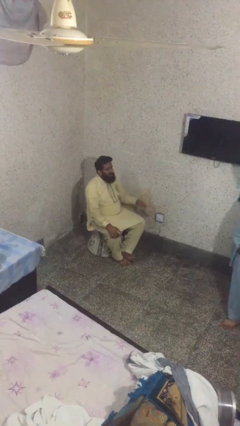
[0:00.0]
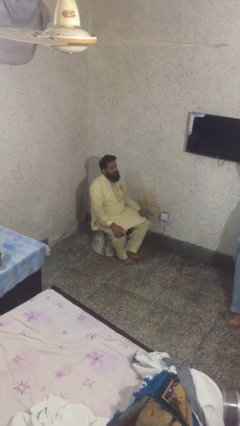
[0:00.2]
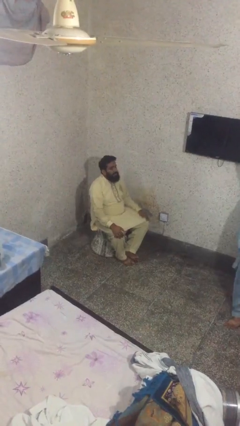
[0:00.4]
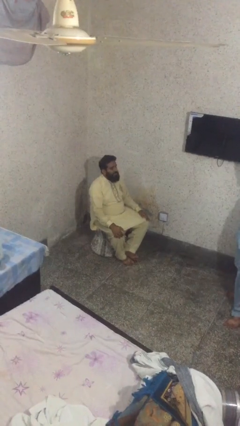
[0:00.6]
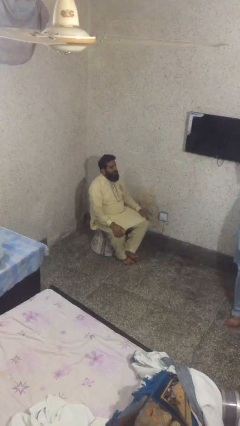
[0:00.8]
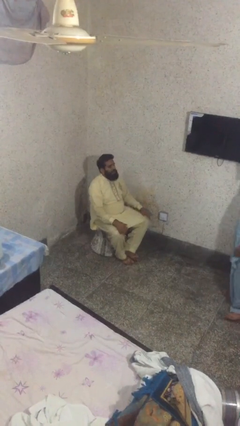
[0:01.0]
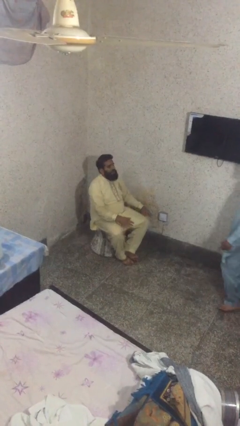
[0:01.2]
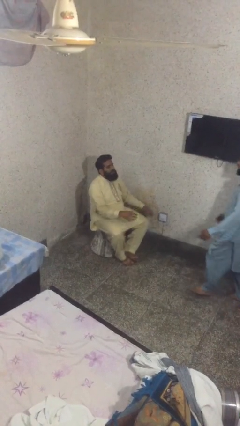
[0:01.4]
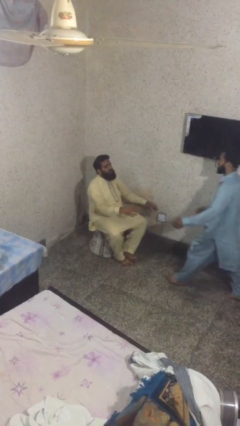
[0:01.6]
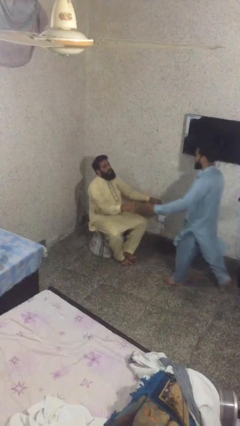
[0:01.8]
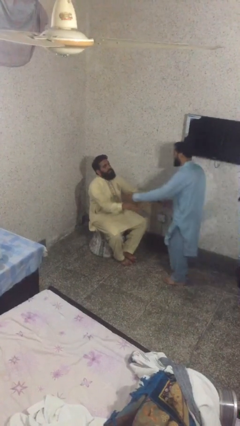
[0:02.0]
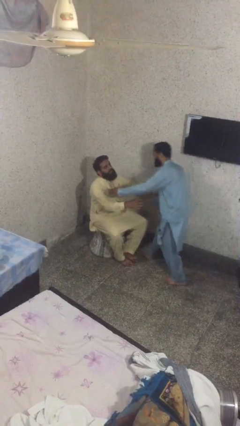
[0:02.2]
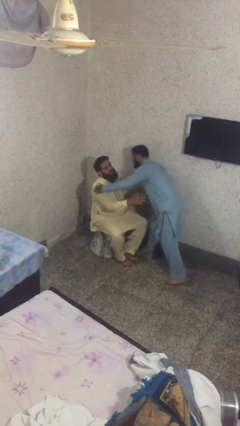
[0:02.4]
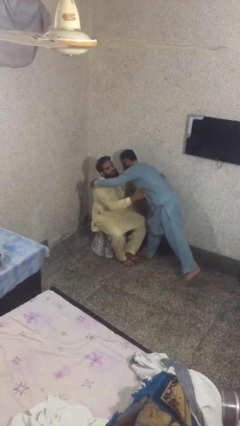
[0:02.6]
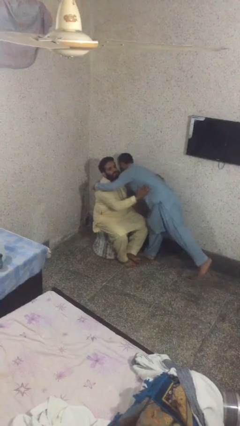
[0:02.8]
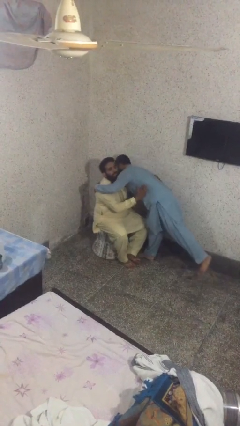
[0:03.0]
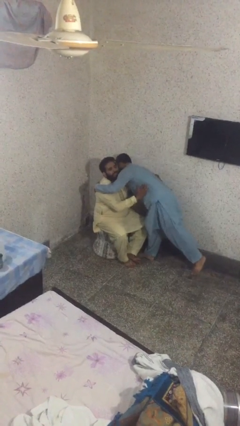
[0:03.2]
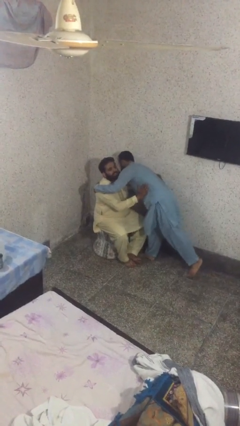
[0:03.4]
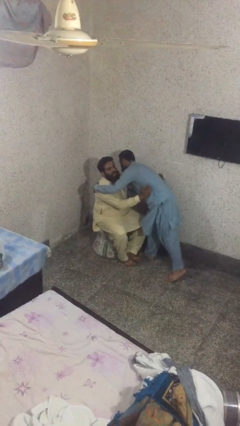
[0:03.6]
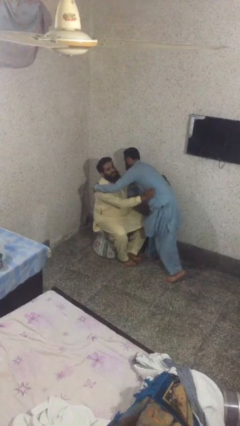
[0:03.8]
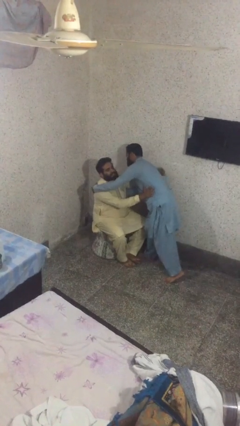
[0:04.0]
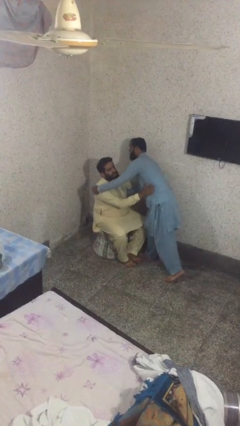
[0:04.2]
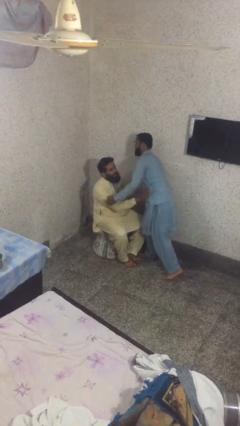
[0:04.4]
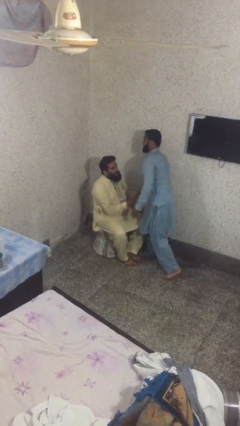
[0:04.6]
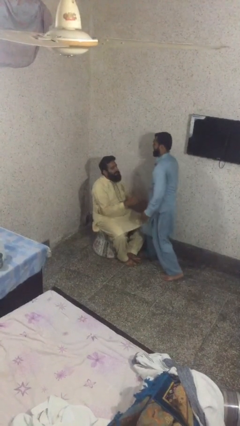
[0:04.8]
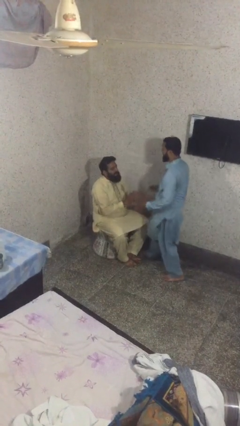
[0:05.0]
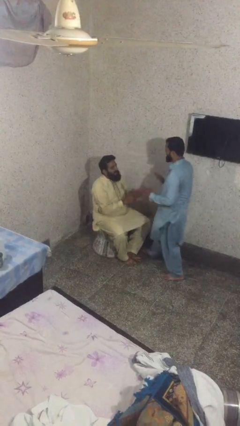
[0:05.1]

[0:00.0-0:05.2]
person embraces person

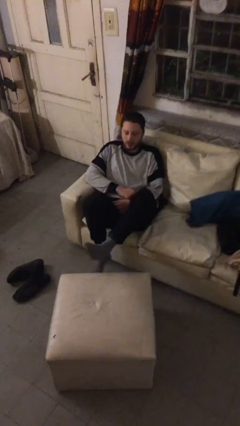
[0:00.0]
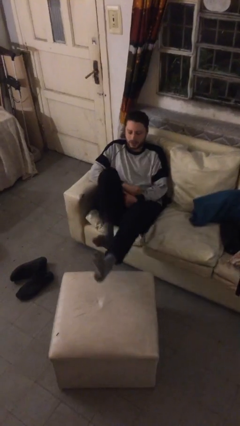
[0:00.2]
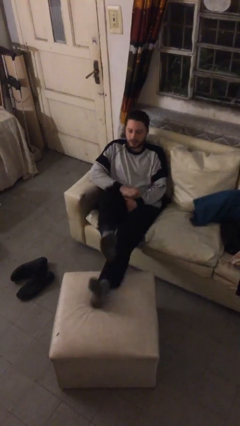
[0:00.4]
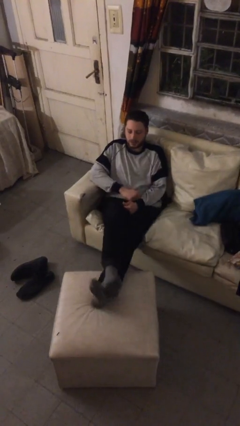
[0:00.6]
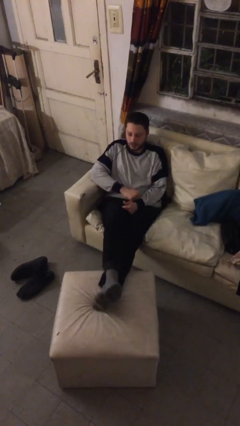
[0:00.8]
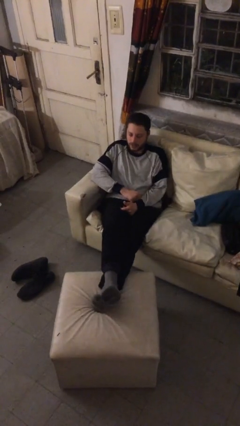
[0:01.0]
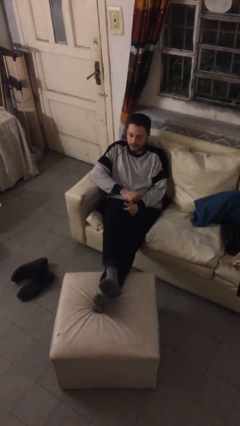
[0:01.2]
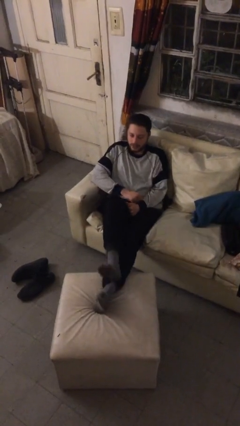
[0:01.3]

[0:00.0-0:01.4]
person puts feet up

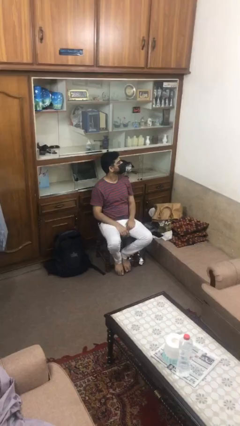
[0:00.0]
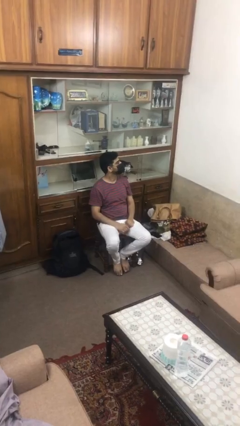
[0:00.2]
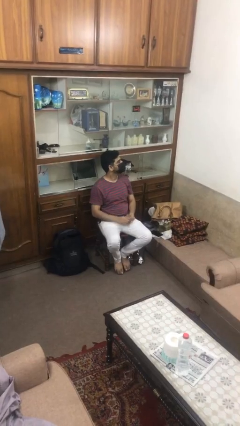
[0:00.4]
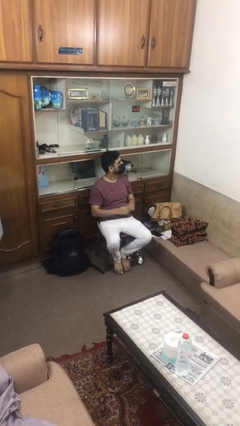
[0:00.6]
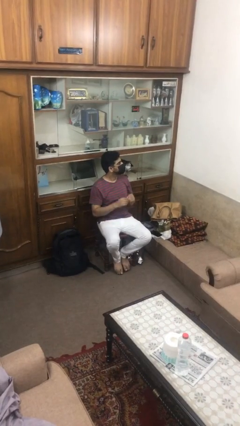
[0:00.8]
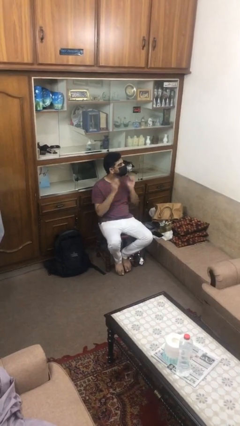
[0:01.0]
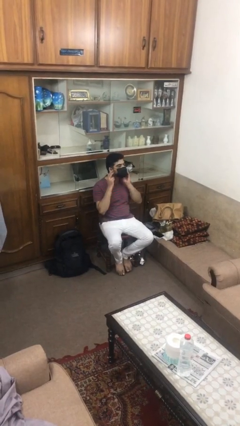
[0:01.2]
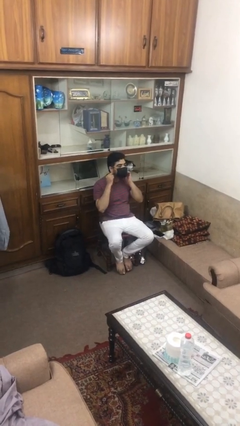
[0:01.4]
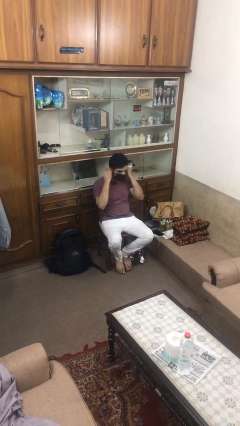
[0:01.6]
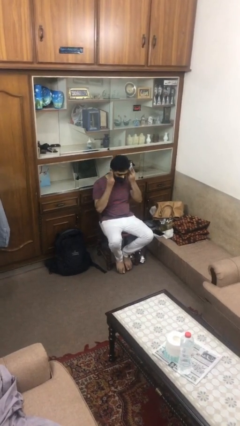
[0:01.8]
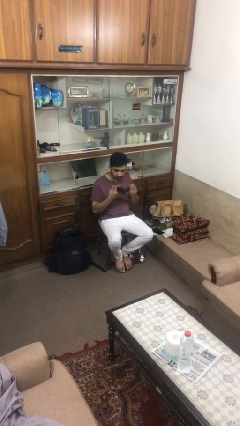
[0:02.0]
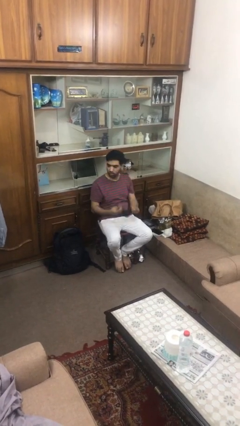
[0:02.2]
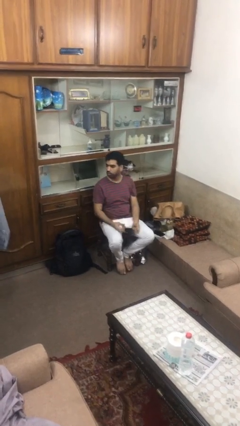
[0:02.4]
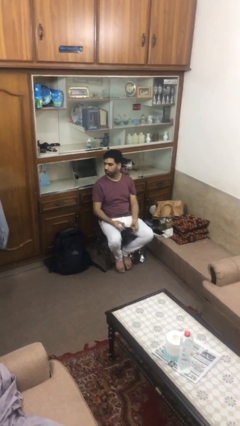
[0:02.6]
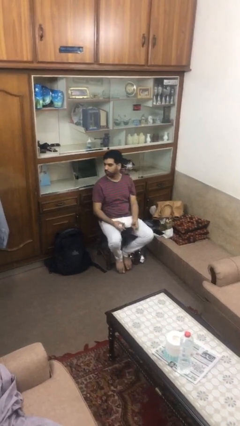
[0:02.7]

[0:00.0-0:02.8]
person takes off facemask

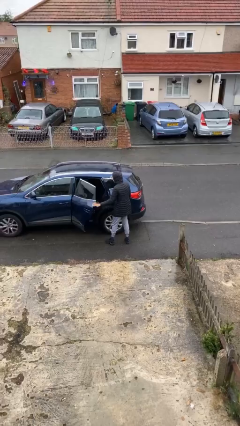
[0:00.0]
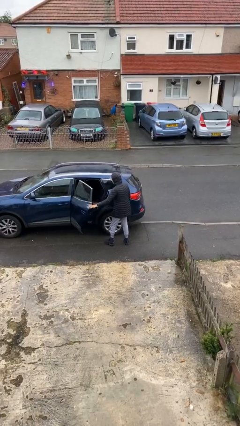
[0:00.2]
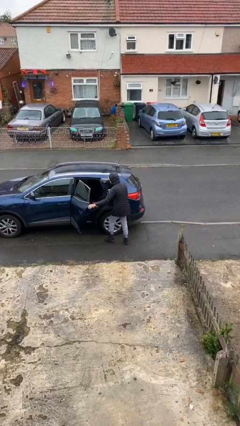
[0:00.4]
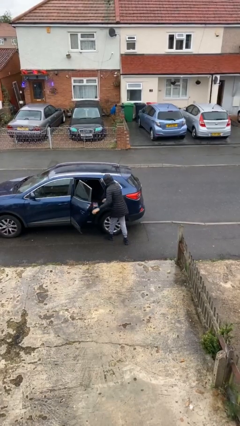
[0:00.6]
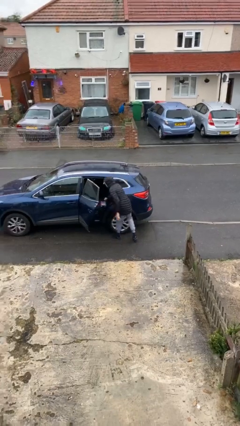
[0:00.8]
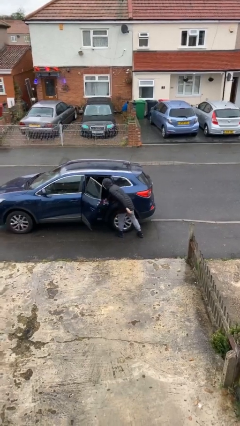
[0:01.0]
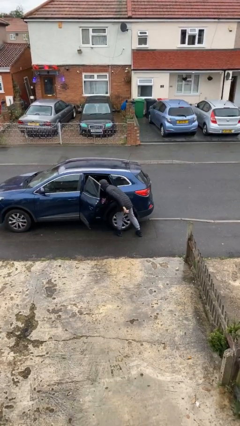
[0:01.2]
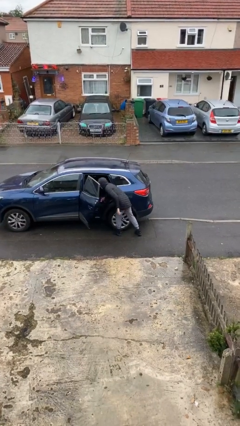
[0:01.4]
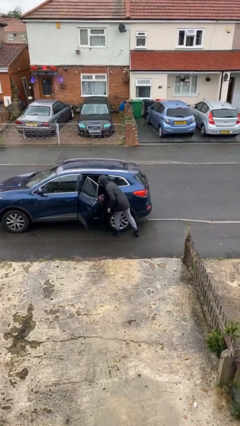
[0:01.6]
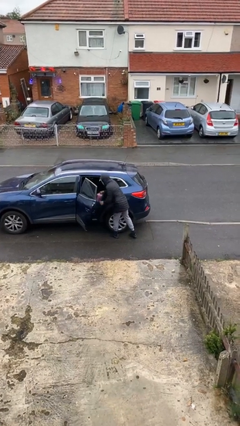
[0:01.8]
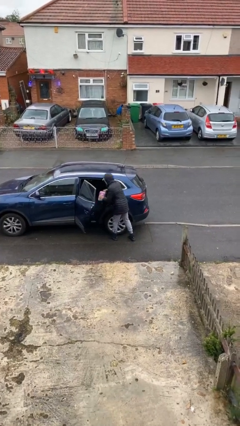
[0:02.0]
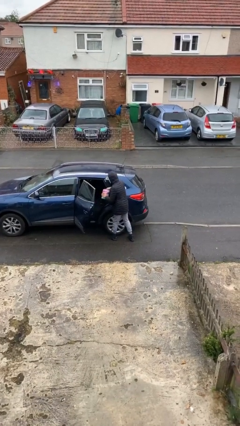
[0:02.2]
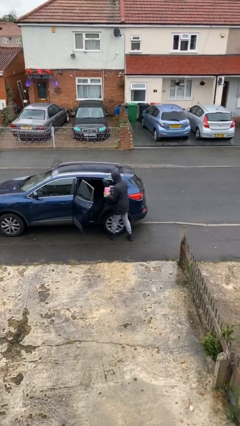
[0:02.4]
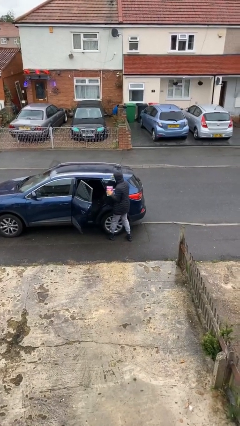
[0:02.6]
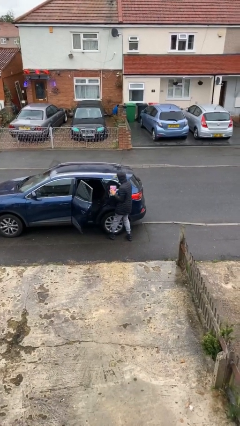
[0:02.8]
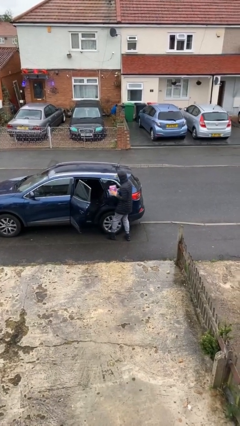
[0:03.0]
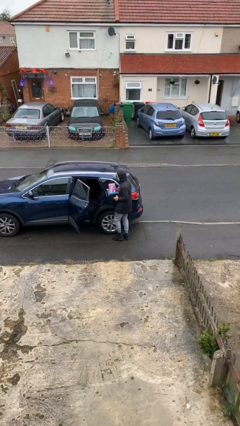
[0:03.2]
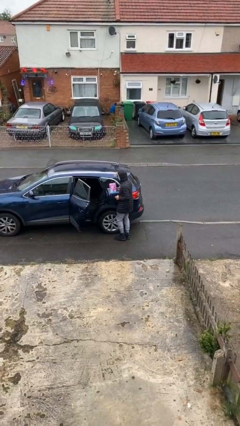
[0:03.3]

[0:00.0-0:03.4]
person unloads car

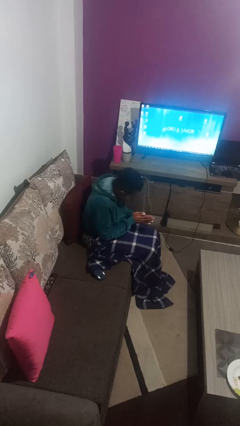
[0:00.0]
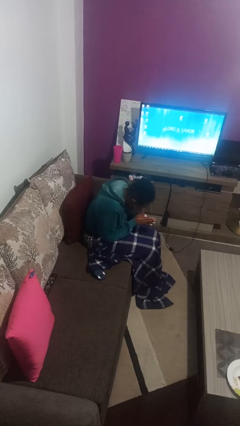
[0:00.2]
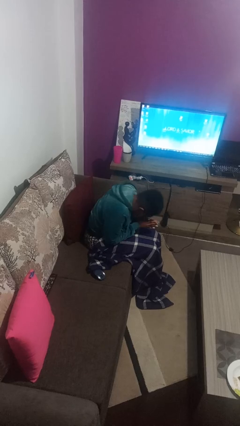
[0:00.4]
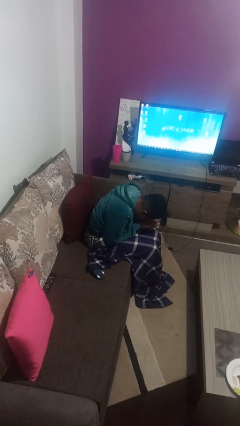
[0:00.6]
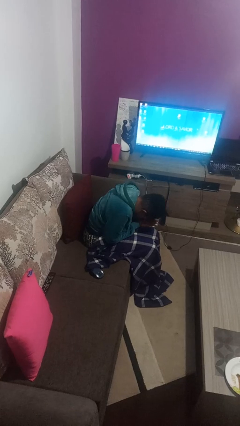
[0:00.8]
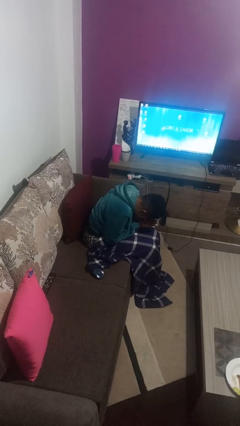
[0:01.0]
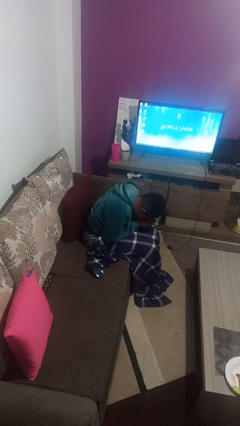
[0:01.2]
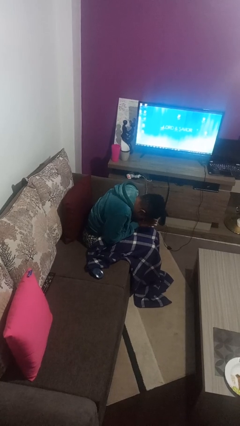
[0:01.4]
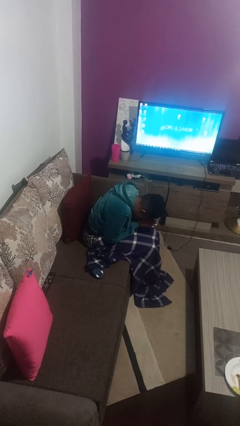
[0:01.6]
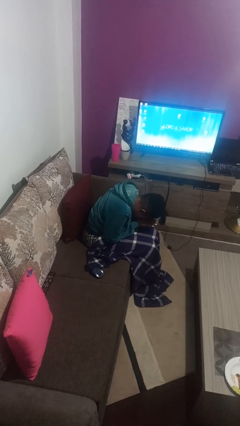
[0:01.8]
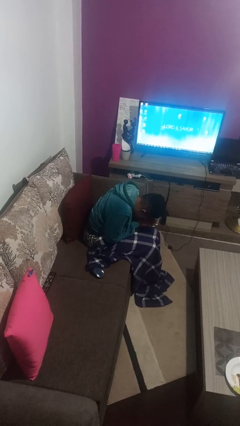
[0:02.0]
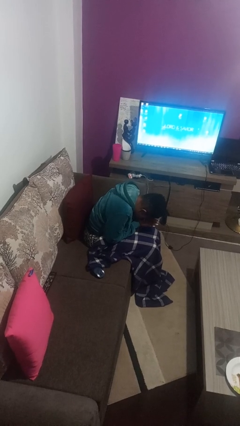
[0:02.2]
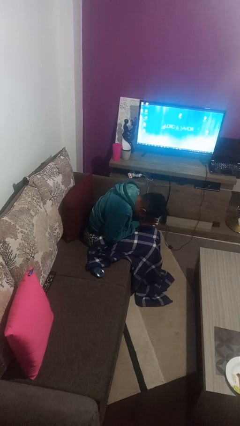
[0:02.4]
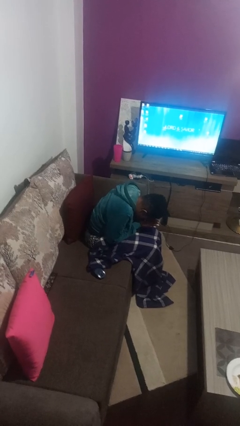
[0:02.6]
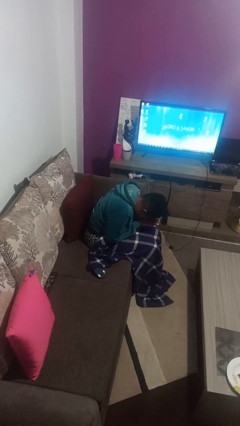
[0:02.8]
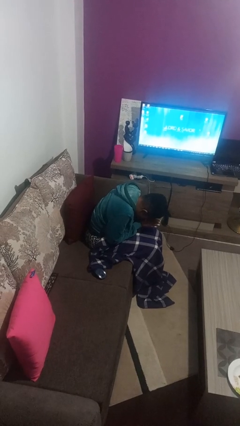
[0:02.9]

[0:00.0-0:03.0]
person prays

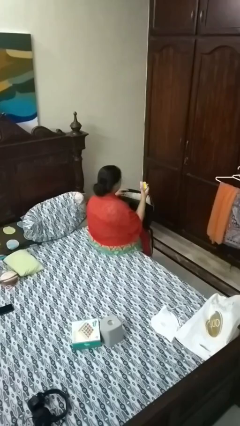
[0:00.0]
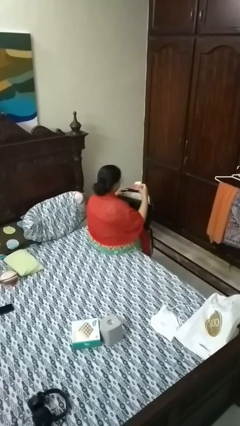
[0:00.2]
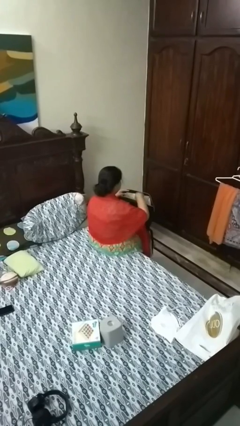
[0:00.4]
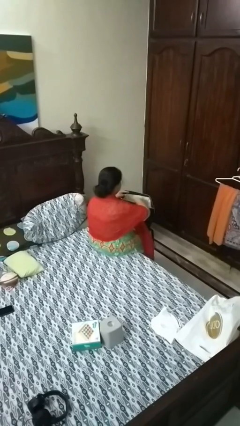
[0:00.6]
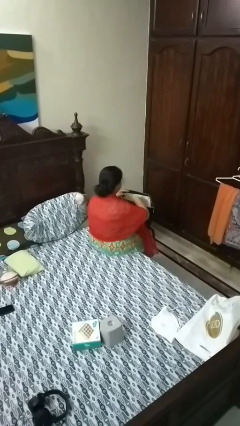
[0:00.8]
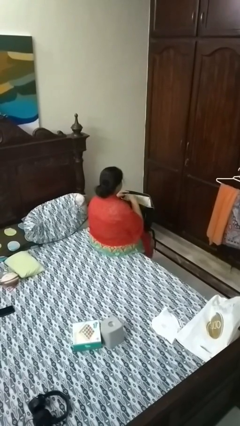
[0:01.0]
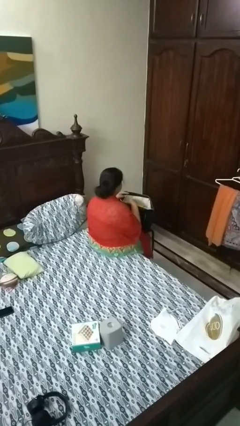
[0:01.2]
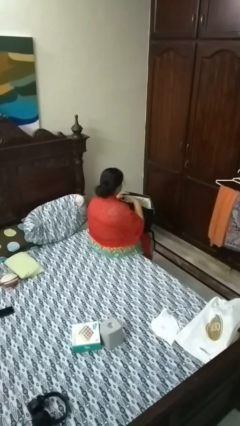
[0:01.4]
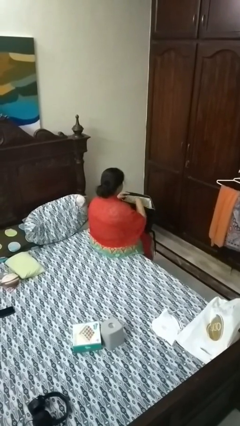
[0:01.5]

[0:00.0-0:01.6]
person puts object into backpack

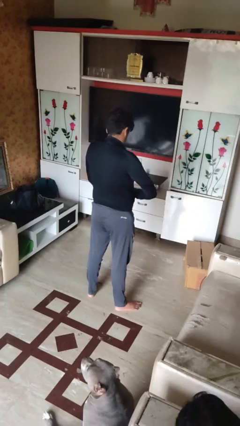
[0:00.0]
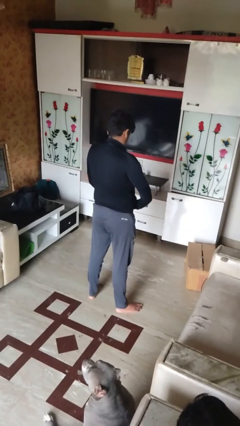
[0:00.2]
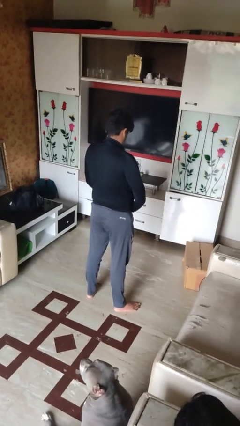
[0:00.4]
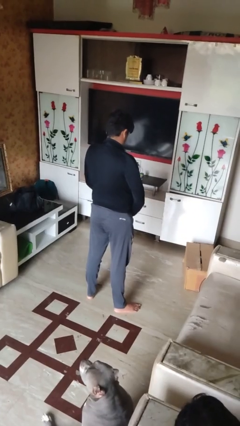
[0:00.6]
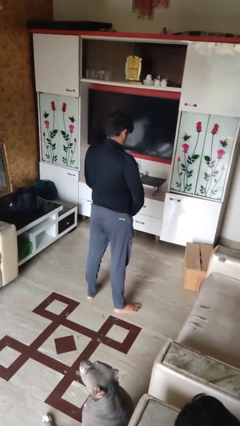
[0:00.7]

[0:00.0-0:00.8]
person unzips jacket
